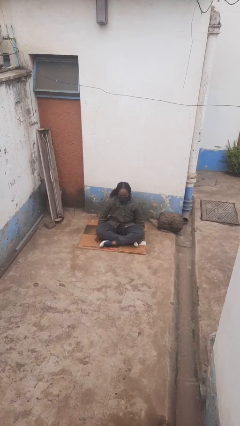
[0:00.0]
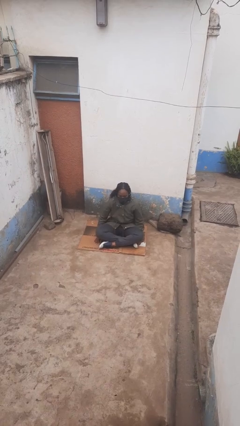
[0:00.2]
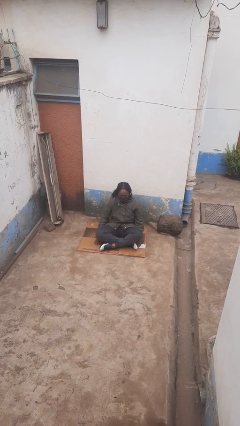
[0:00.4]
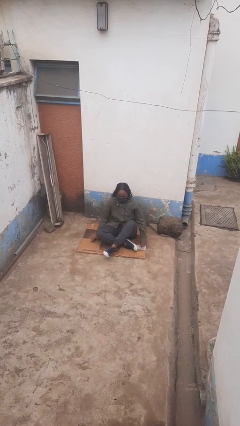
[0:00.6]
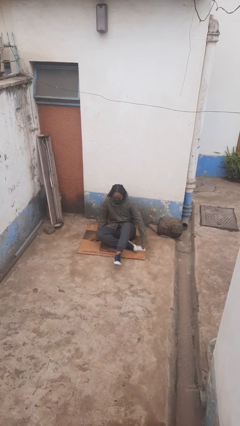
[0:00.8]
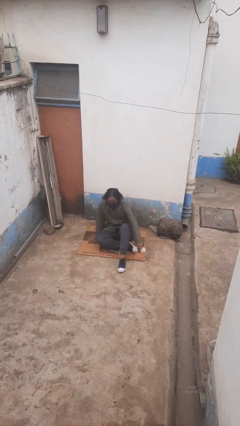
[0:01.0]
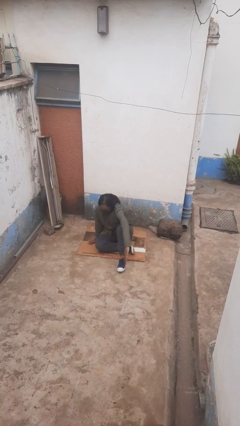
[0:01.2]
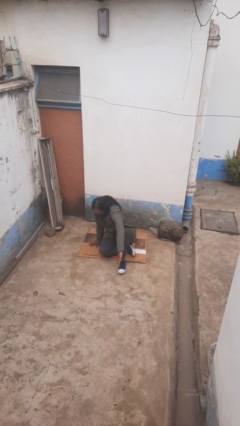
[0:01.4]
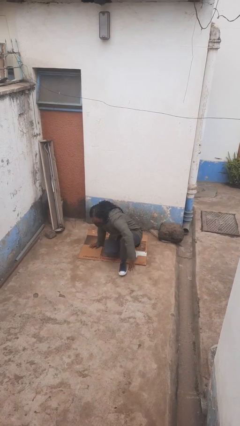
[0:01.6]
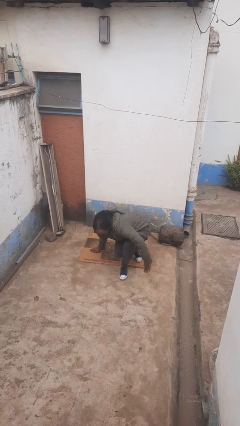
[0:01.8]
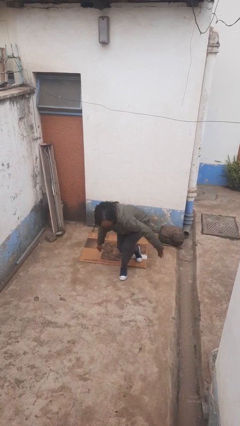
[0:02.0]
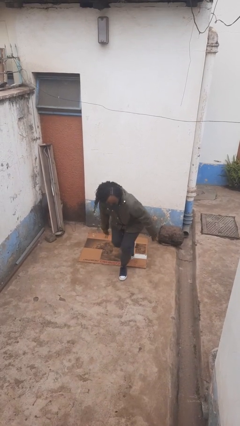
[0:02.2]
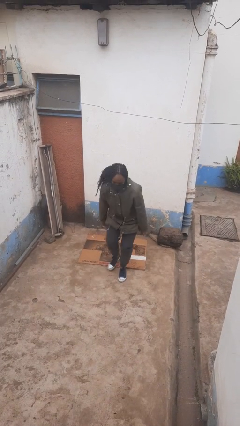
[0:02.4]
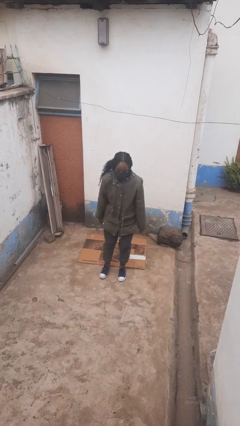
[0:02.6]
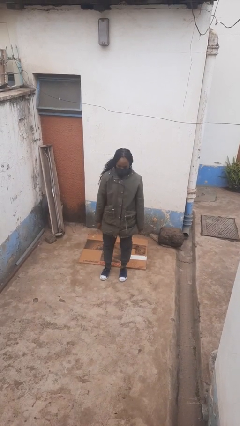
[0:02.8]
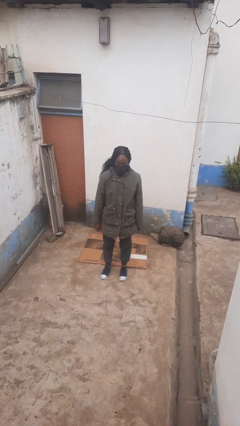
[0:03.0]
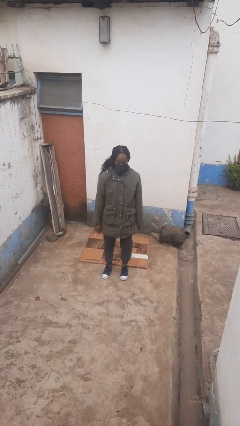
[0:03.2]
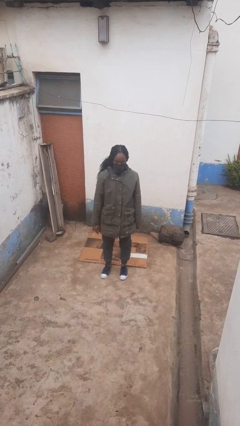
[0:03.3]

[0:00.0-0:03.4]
person stands up from floor

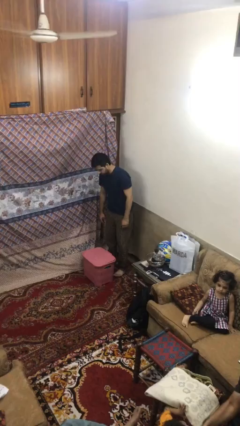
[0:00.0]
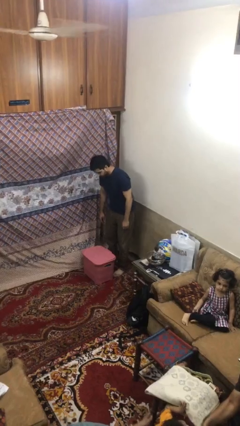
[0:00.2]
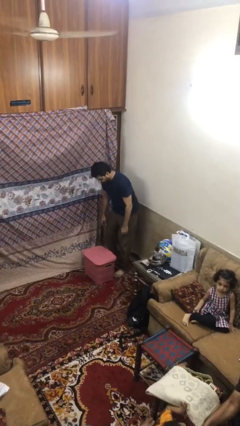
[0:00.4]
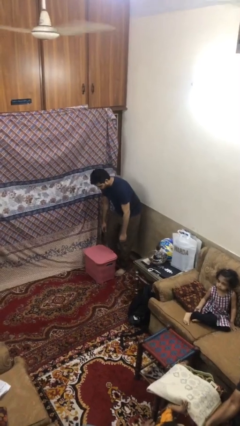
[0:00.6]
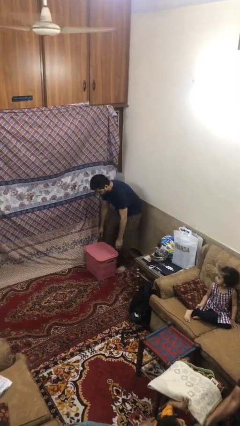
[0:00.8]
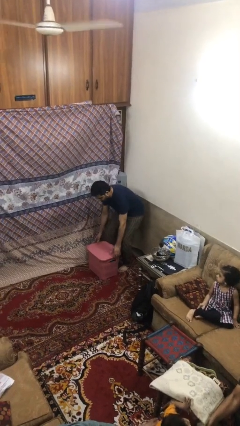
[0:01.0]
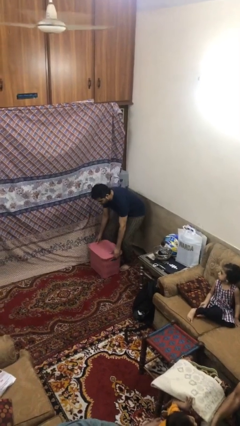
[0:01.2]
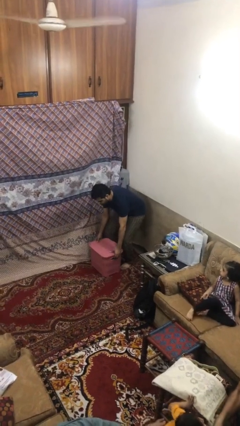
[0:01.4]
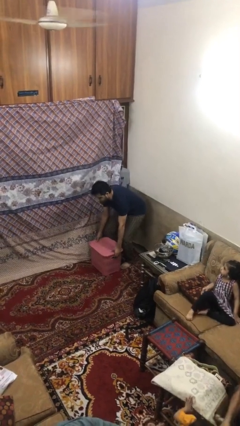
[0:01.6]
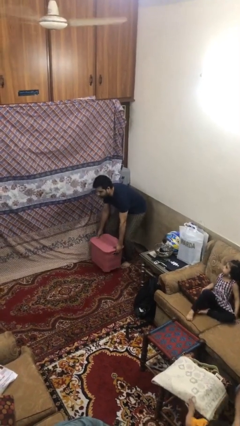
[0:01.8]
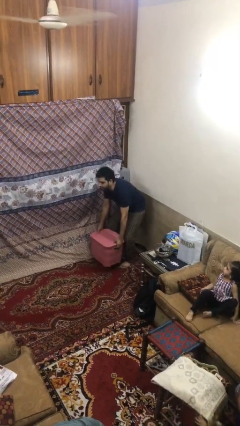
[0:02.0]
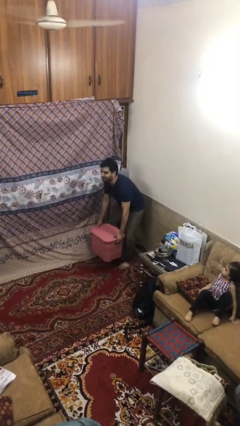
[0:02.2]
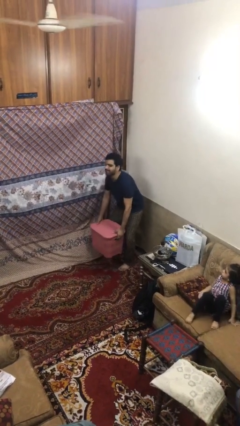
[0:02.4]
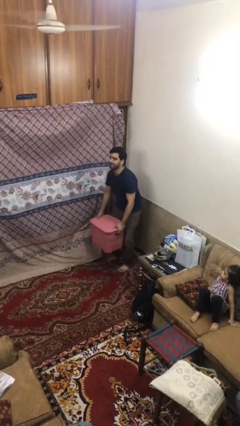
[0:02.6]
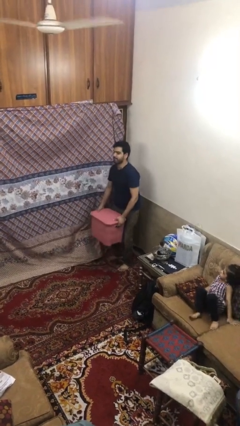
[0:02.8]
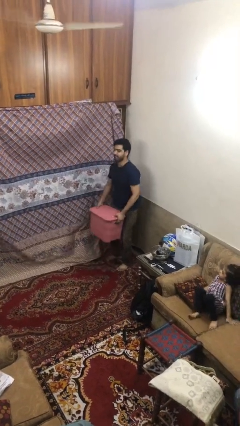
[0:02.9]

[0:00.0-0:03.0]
person picks up object from floor

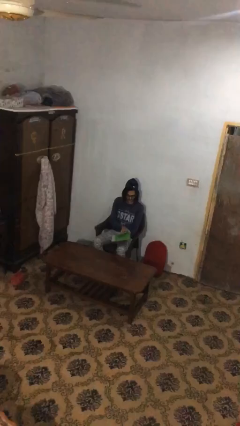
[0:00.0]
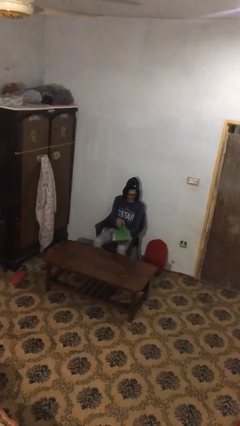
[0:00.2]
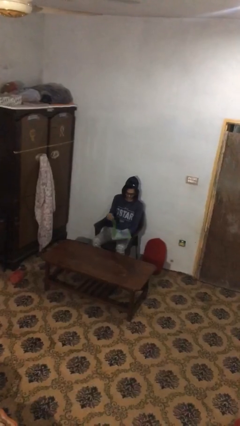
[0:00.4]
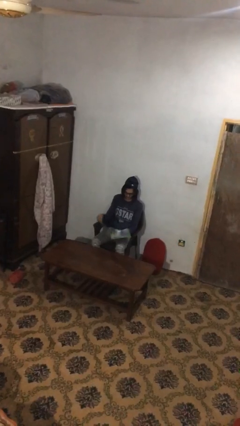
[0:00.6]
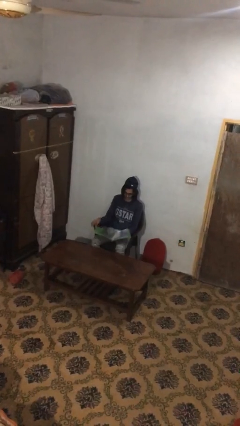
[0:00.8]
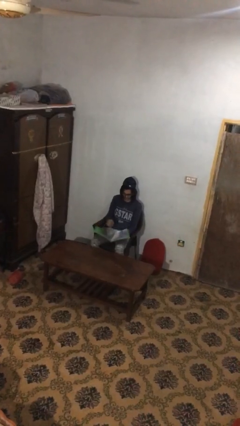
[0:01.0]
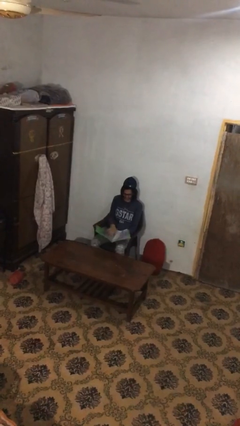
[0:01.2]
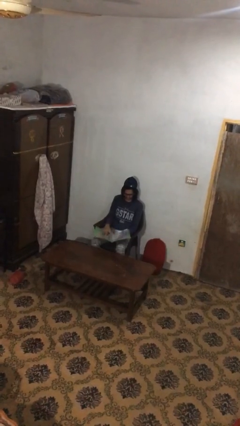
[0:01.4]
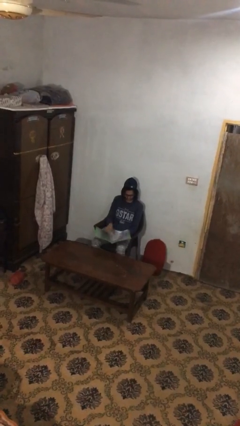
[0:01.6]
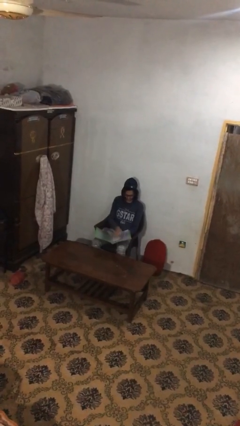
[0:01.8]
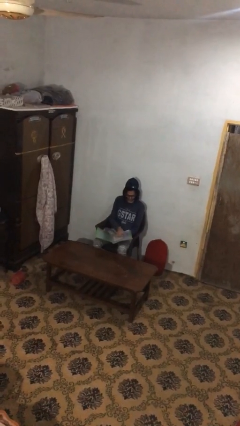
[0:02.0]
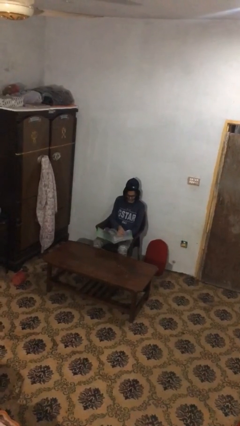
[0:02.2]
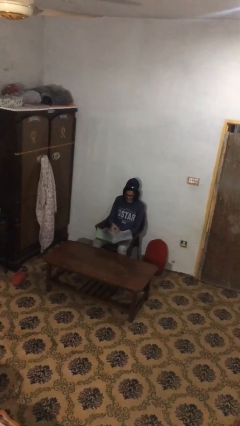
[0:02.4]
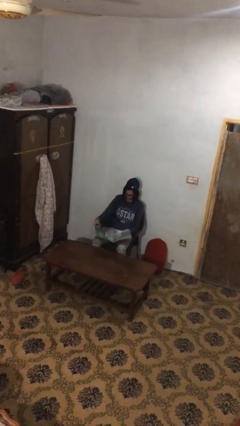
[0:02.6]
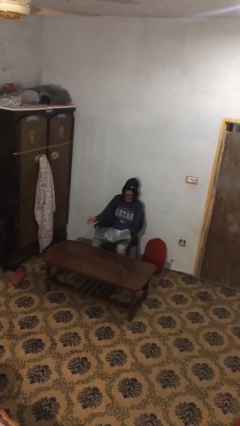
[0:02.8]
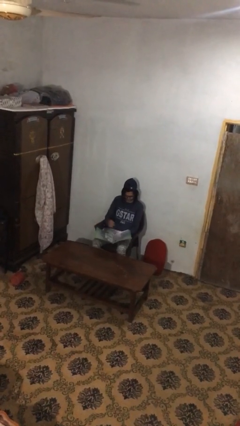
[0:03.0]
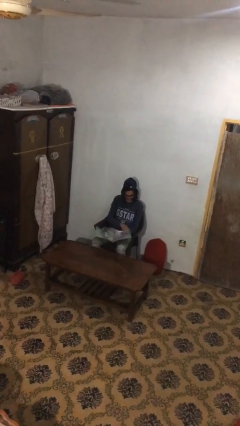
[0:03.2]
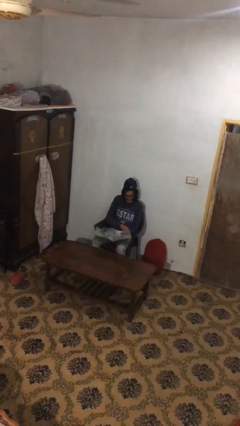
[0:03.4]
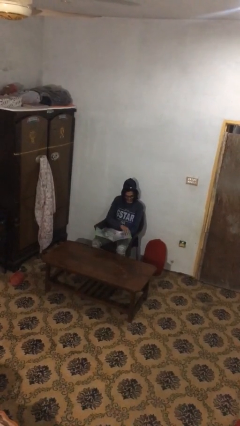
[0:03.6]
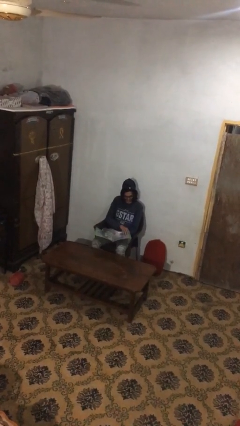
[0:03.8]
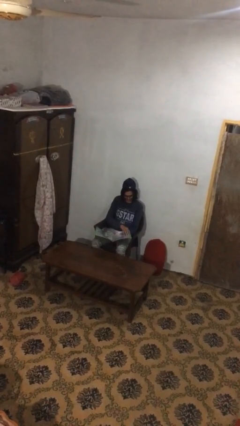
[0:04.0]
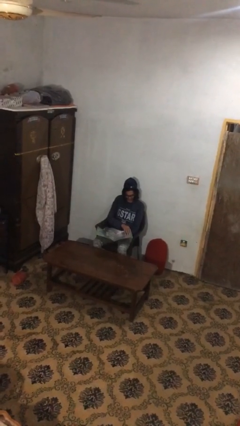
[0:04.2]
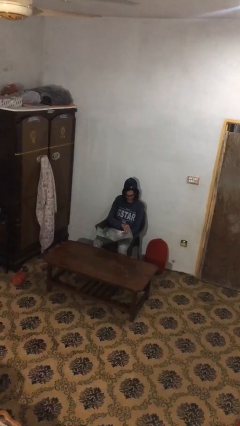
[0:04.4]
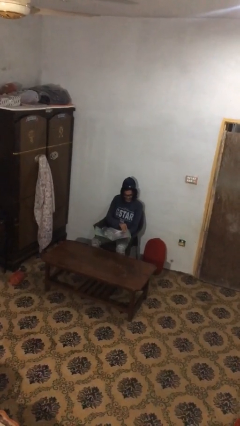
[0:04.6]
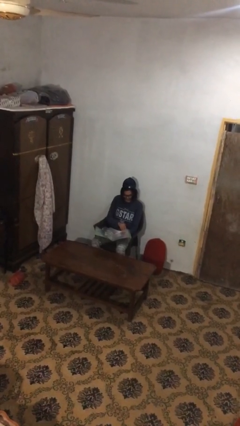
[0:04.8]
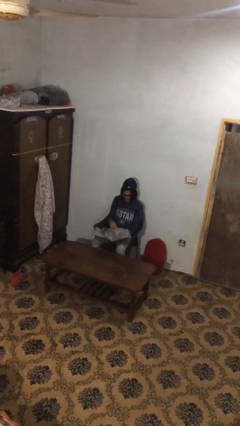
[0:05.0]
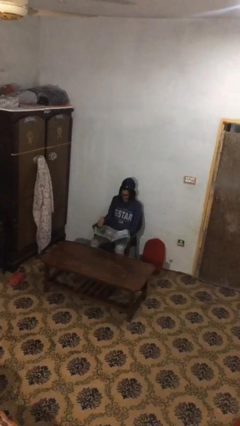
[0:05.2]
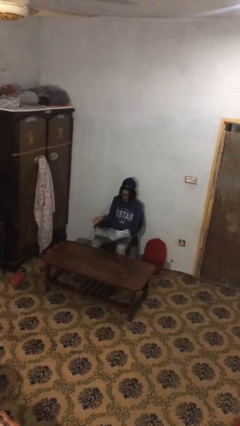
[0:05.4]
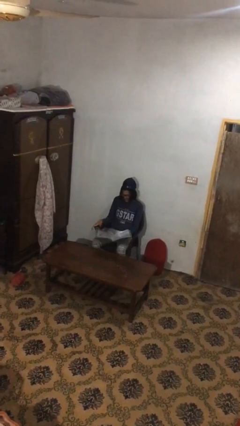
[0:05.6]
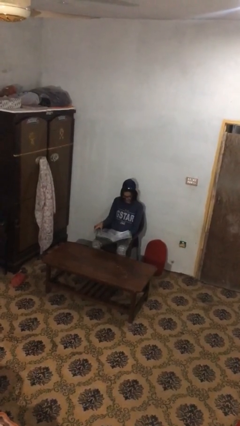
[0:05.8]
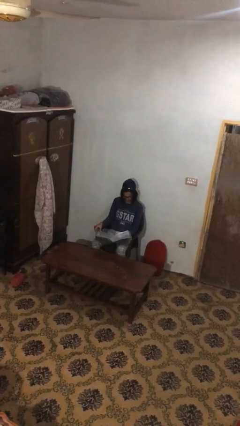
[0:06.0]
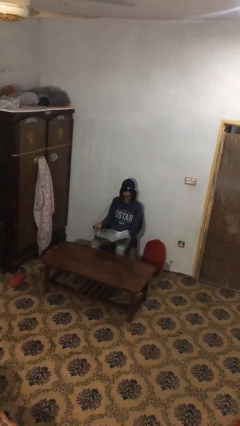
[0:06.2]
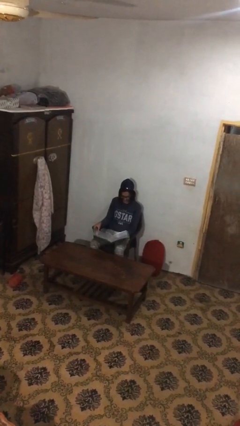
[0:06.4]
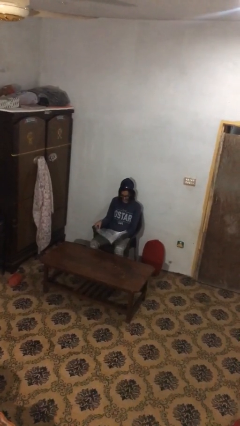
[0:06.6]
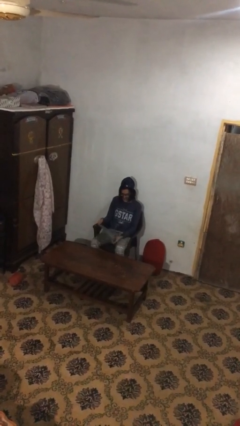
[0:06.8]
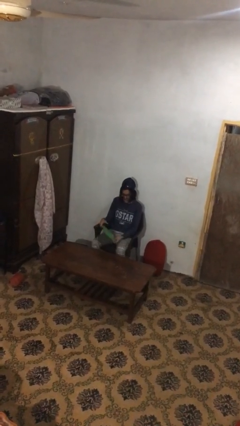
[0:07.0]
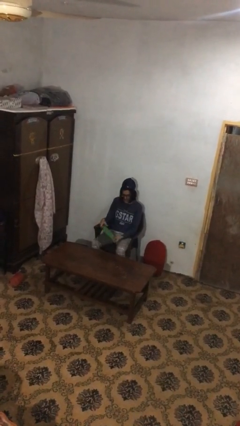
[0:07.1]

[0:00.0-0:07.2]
person reads document

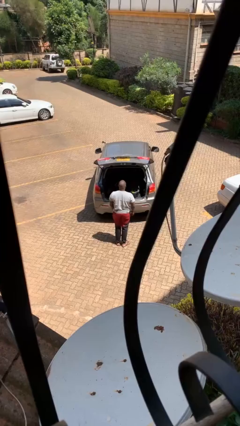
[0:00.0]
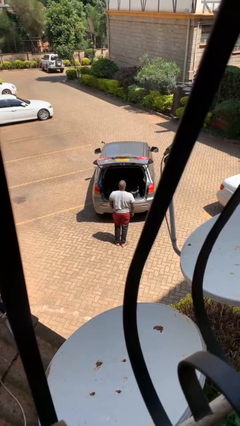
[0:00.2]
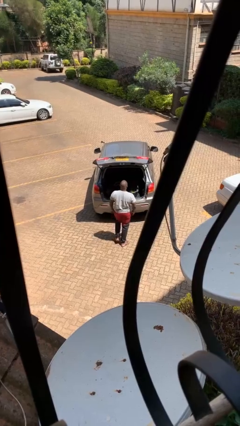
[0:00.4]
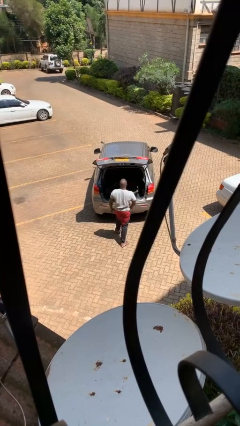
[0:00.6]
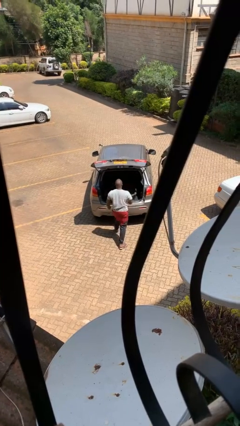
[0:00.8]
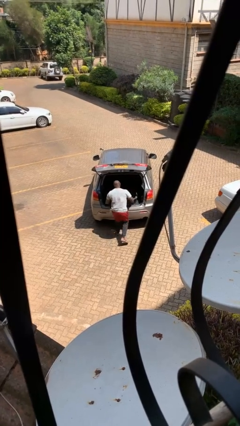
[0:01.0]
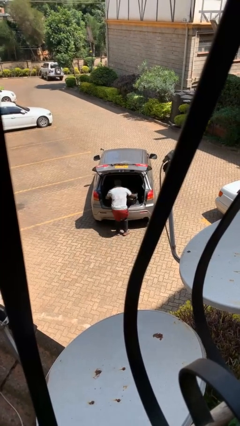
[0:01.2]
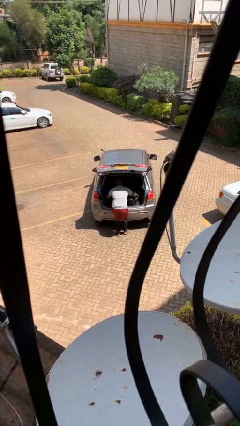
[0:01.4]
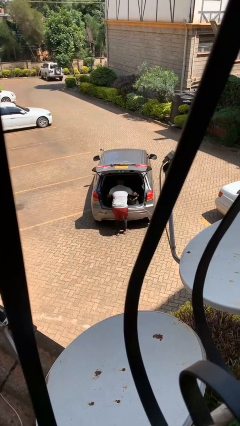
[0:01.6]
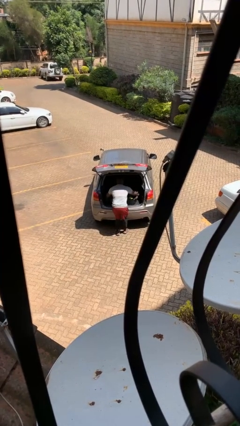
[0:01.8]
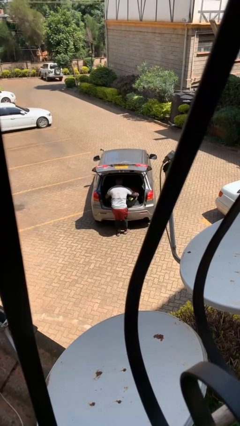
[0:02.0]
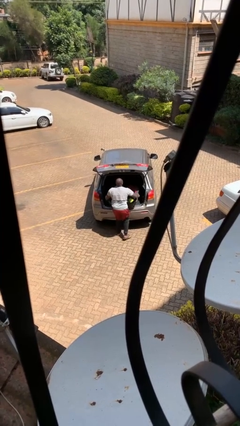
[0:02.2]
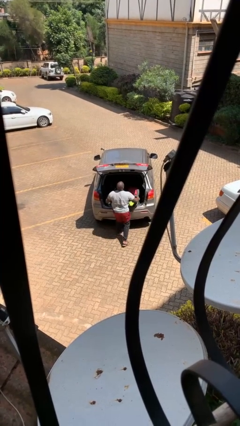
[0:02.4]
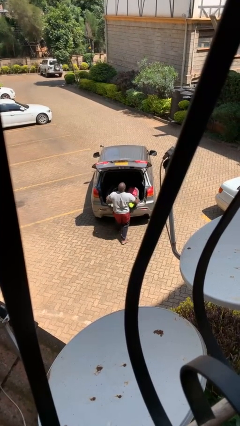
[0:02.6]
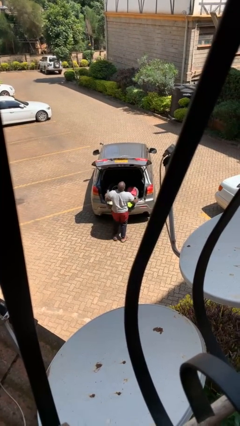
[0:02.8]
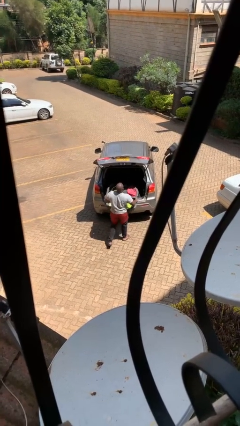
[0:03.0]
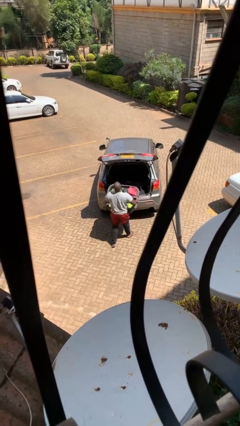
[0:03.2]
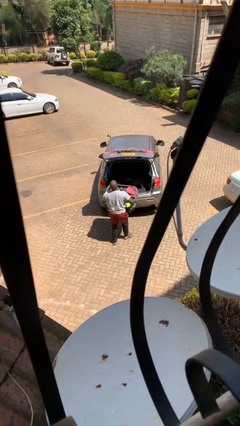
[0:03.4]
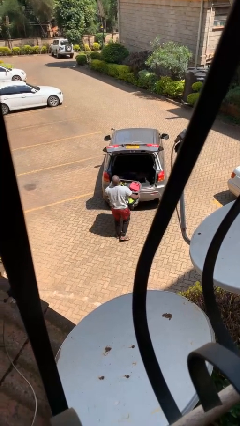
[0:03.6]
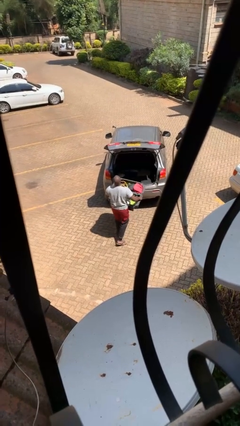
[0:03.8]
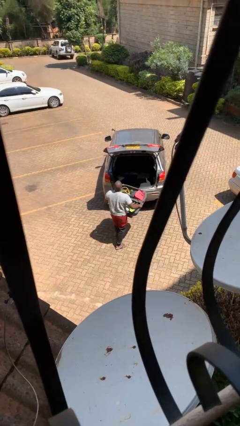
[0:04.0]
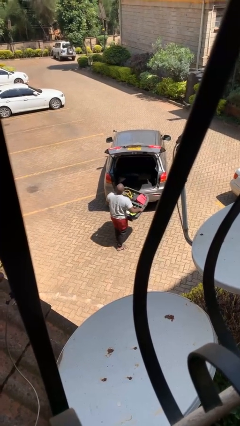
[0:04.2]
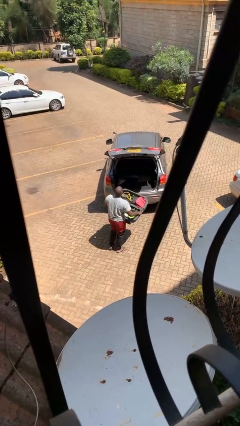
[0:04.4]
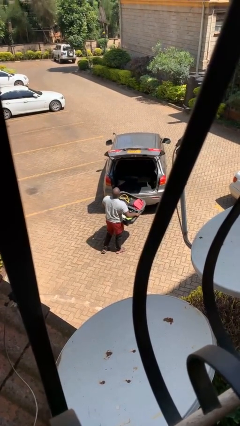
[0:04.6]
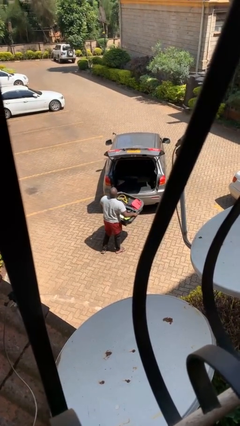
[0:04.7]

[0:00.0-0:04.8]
person unloads car
